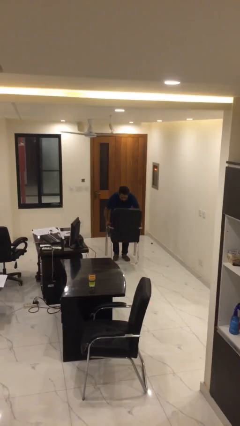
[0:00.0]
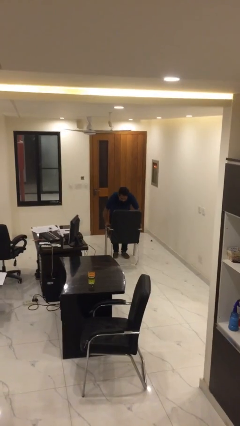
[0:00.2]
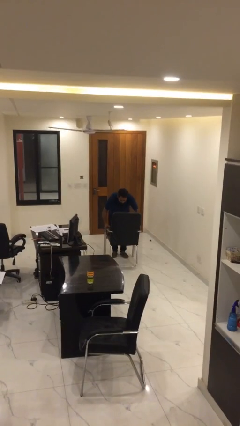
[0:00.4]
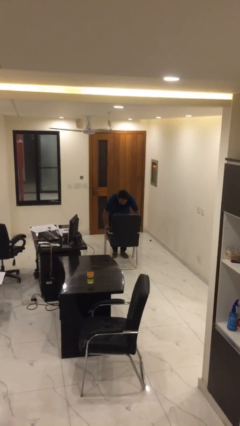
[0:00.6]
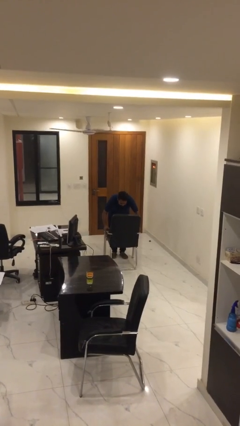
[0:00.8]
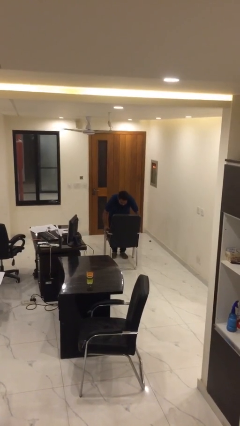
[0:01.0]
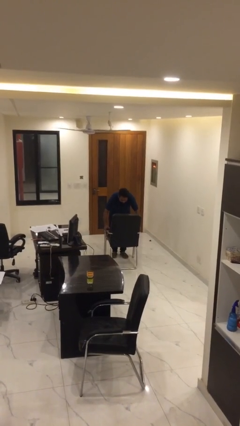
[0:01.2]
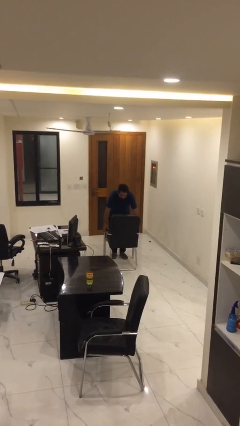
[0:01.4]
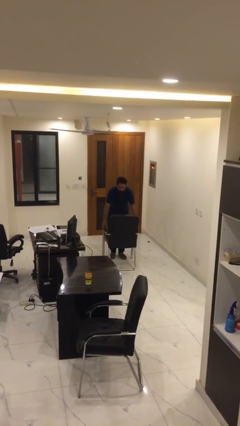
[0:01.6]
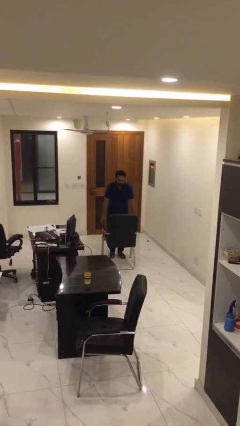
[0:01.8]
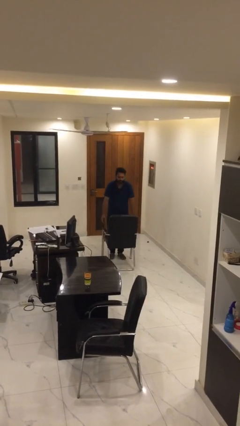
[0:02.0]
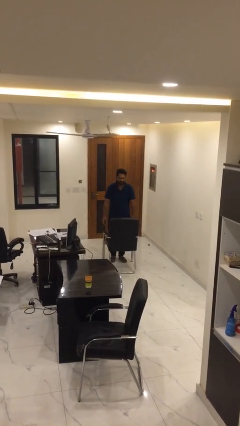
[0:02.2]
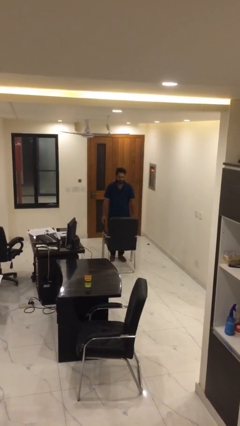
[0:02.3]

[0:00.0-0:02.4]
person puts down object on floor

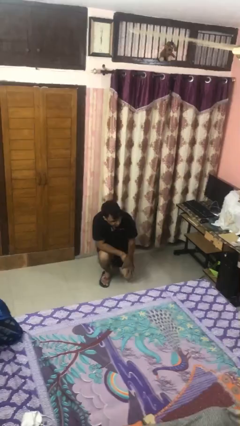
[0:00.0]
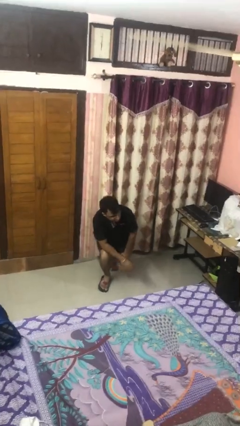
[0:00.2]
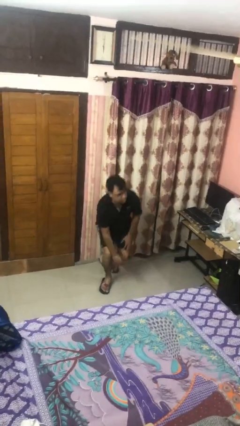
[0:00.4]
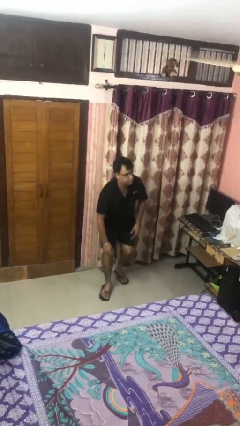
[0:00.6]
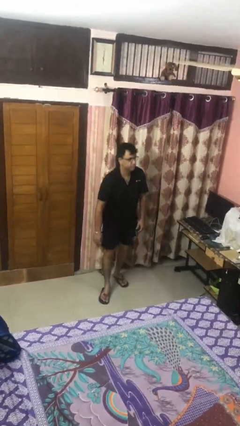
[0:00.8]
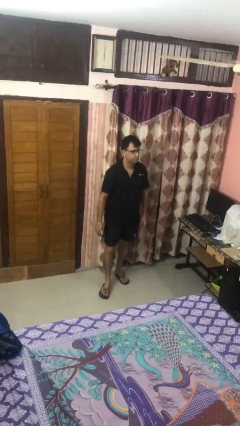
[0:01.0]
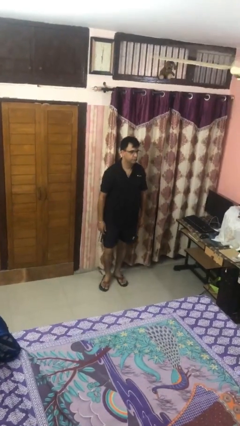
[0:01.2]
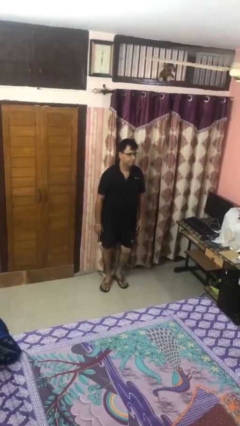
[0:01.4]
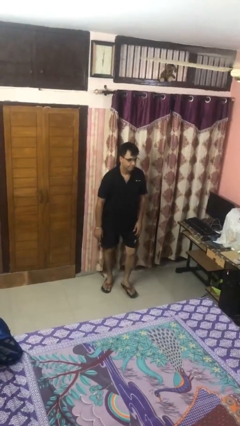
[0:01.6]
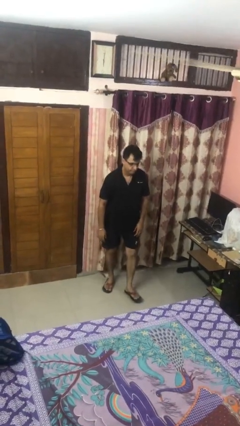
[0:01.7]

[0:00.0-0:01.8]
person stands up from floor

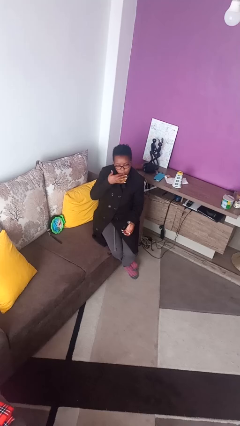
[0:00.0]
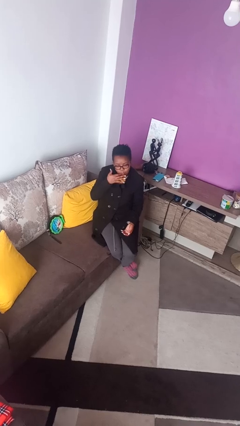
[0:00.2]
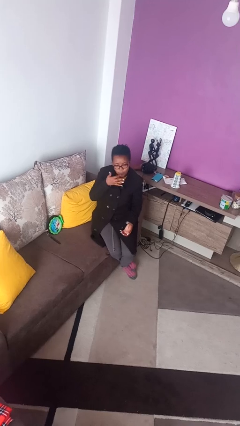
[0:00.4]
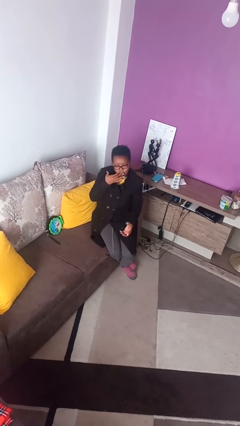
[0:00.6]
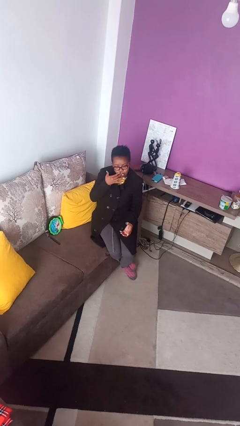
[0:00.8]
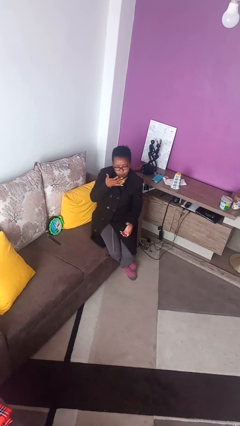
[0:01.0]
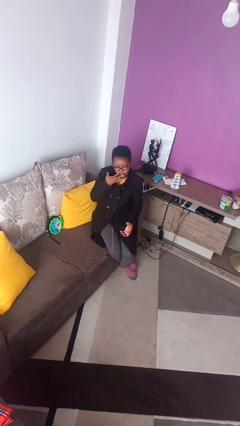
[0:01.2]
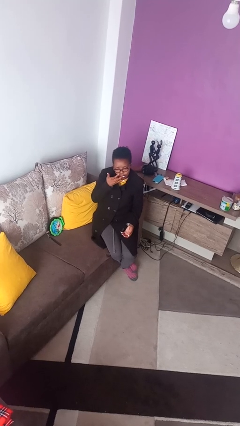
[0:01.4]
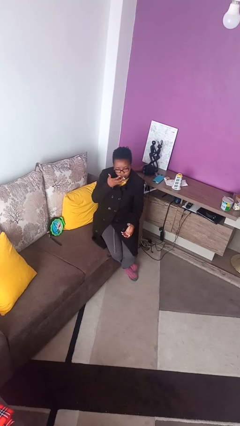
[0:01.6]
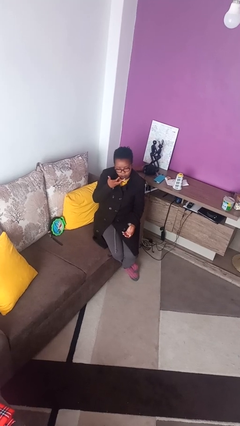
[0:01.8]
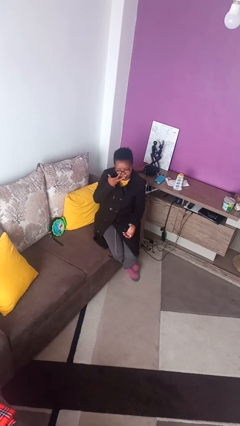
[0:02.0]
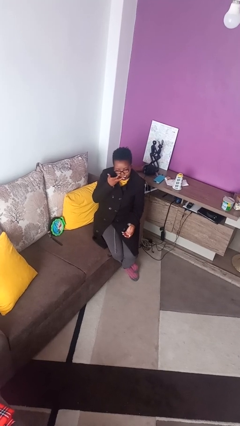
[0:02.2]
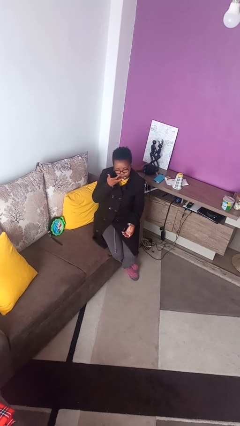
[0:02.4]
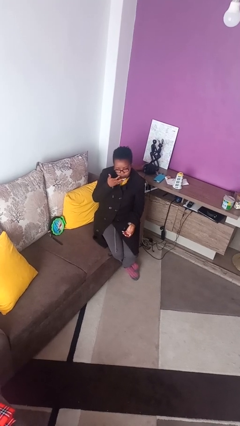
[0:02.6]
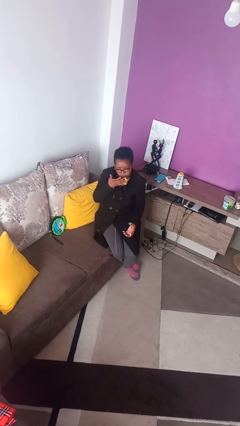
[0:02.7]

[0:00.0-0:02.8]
person licks fingers

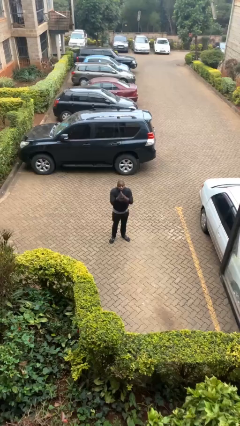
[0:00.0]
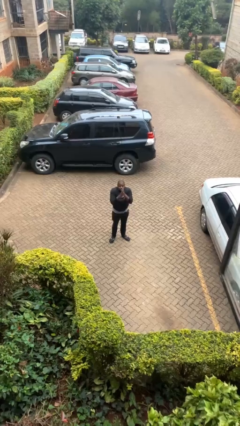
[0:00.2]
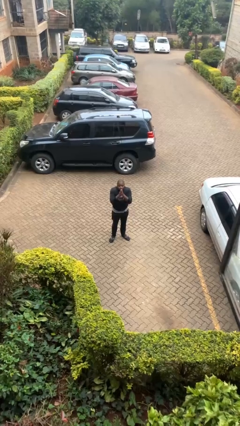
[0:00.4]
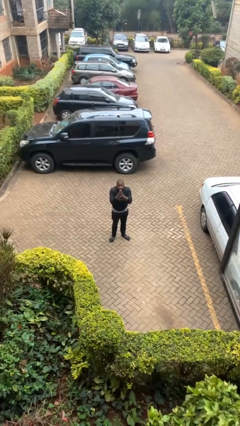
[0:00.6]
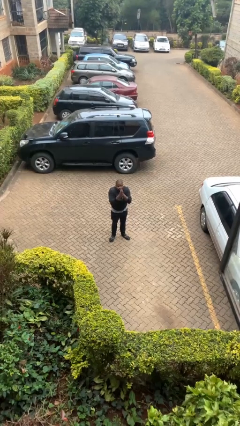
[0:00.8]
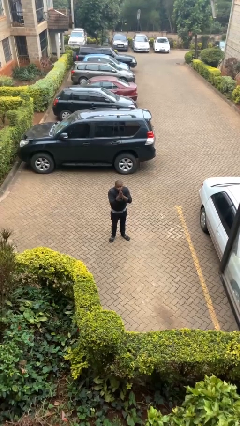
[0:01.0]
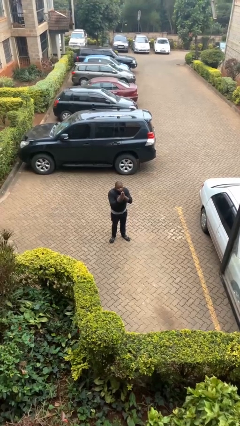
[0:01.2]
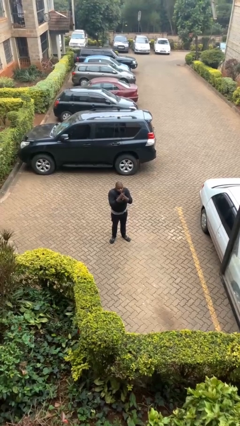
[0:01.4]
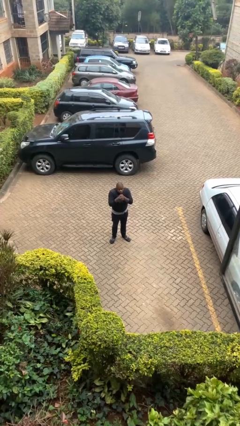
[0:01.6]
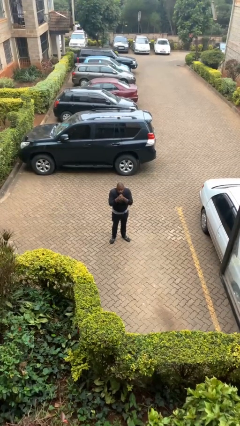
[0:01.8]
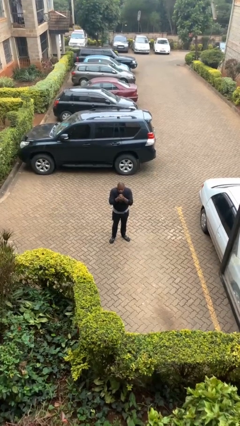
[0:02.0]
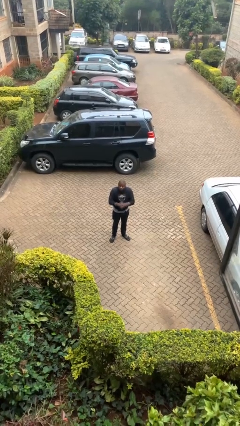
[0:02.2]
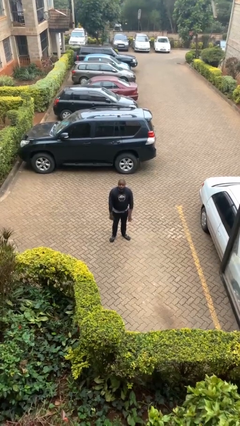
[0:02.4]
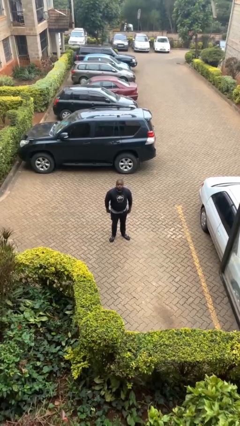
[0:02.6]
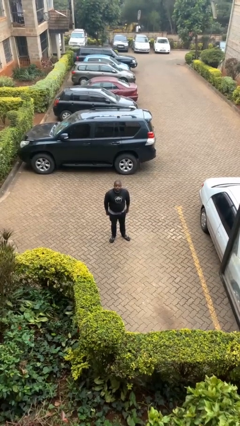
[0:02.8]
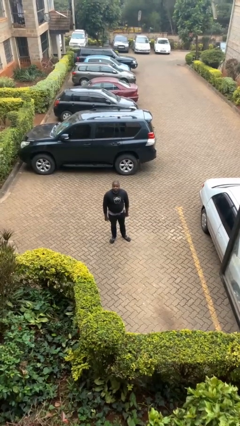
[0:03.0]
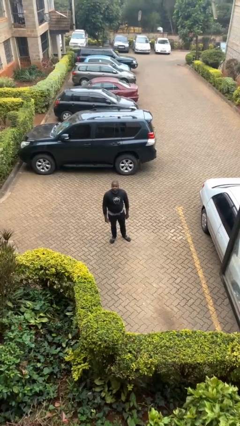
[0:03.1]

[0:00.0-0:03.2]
person blows into hands

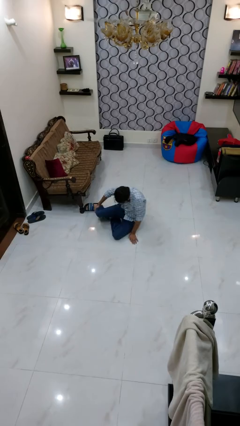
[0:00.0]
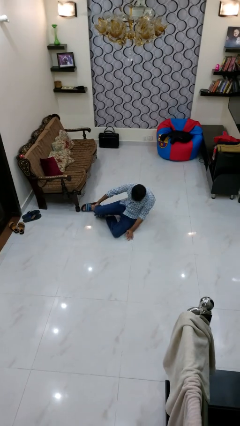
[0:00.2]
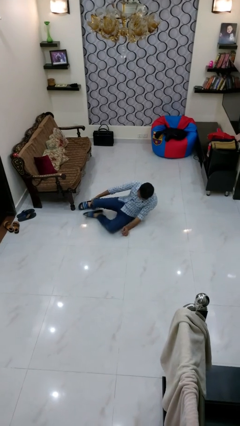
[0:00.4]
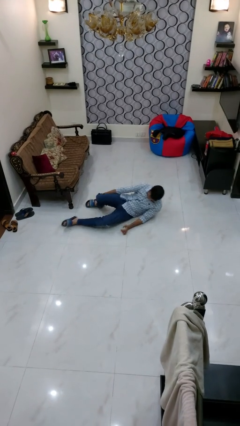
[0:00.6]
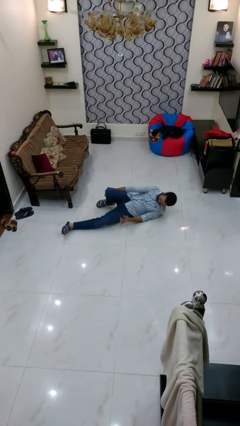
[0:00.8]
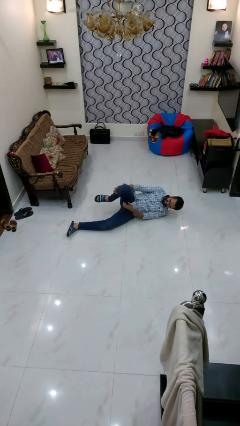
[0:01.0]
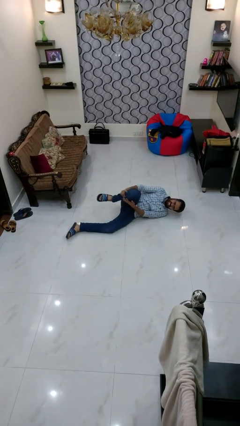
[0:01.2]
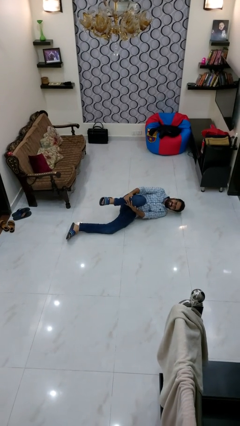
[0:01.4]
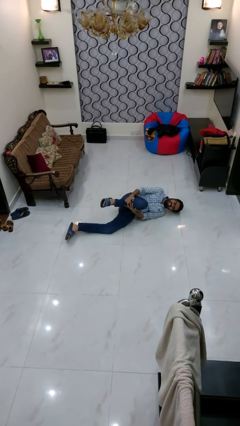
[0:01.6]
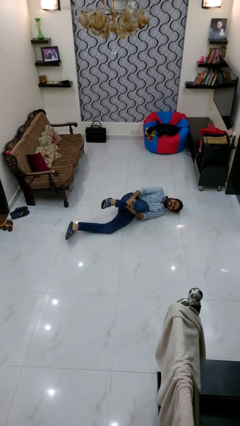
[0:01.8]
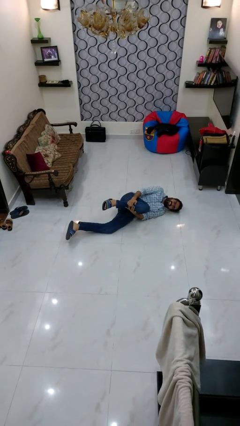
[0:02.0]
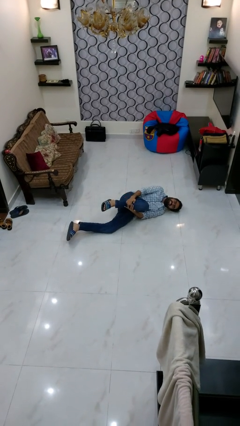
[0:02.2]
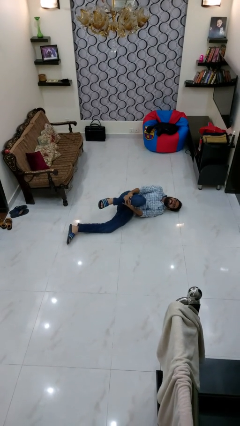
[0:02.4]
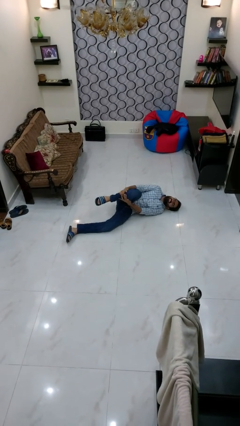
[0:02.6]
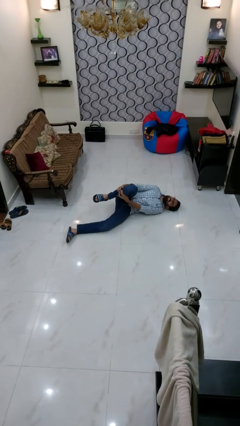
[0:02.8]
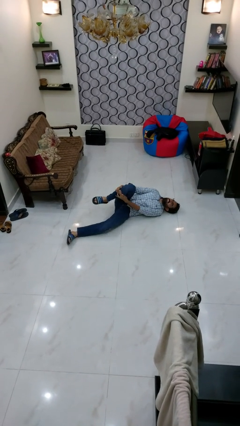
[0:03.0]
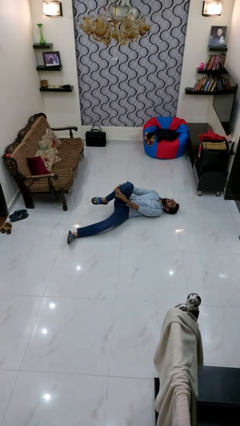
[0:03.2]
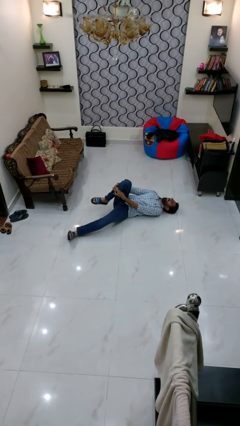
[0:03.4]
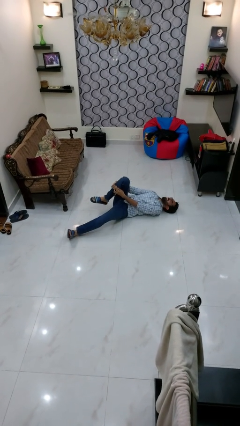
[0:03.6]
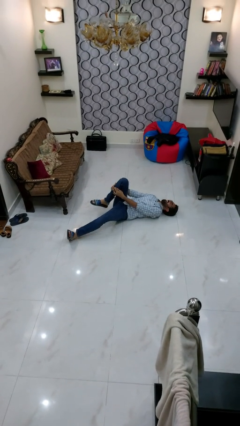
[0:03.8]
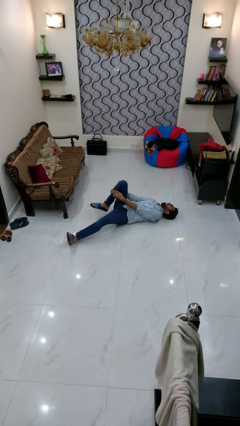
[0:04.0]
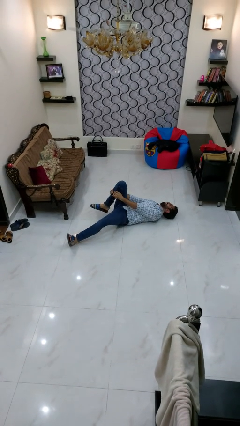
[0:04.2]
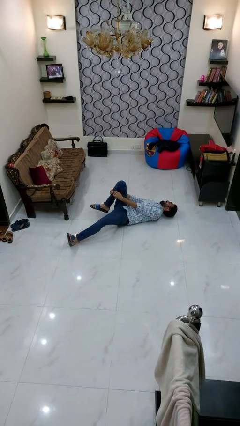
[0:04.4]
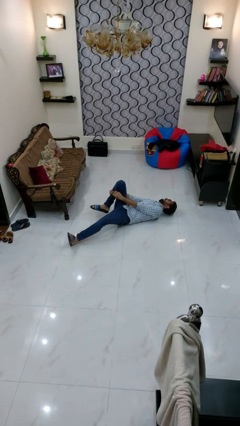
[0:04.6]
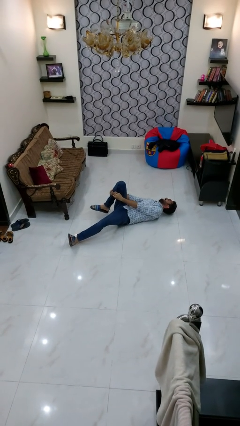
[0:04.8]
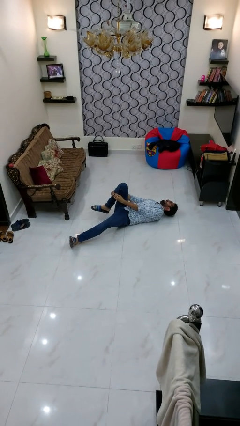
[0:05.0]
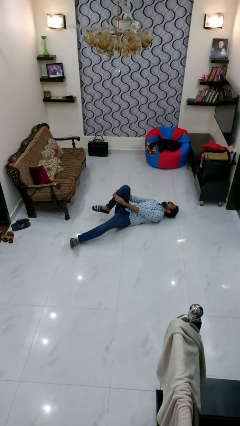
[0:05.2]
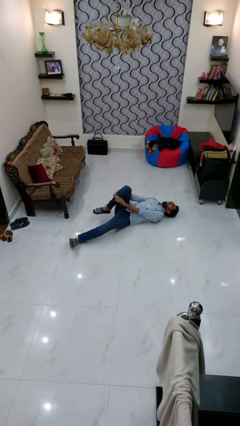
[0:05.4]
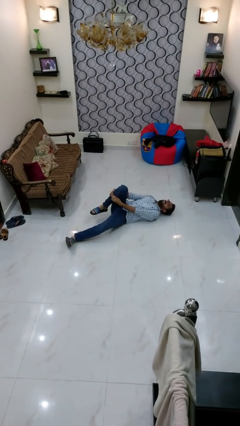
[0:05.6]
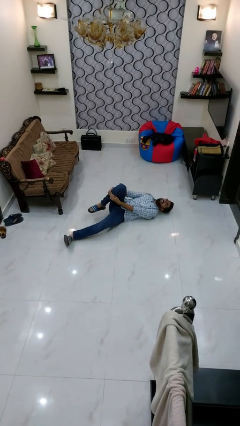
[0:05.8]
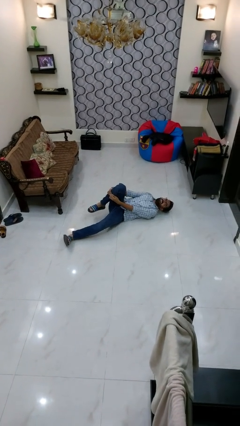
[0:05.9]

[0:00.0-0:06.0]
person lies down on floor

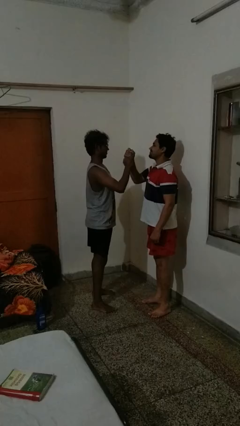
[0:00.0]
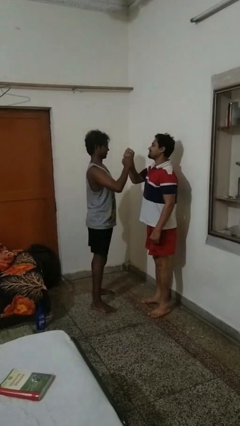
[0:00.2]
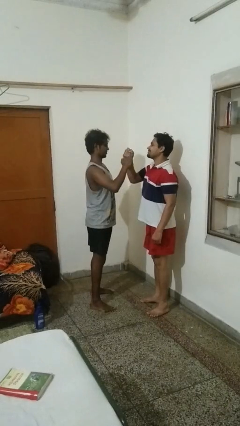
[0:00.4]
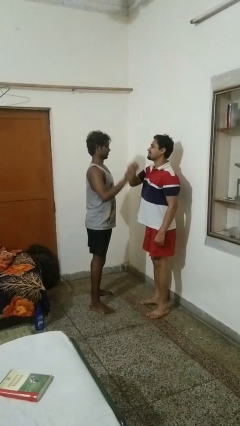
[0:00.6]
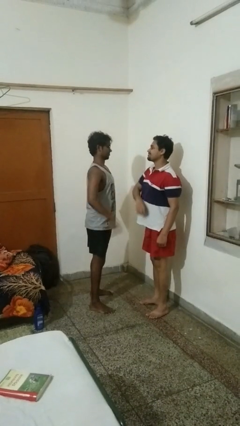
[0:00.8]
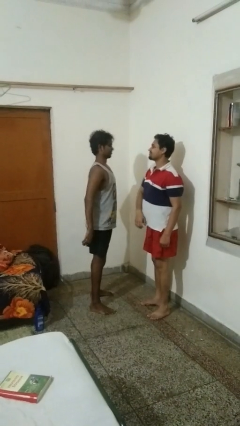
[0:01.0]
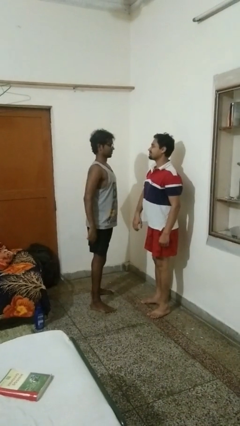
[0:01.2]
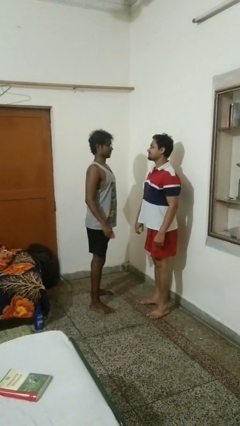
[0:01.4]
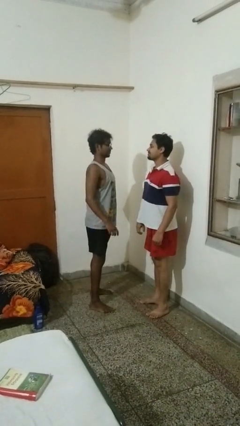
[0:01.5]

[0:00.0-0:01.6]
person highfives hand
